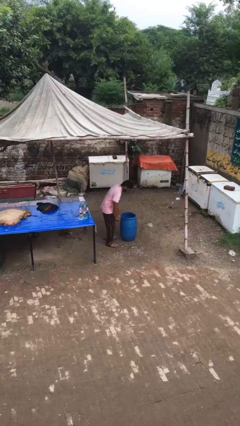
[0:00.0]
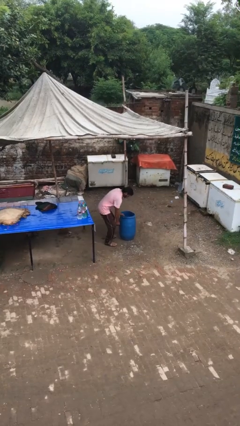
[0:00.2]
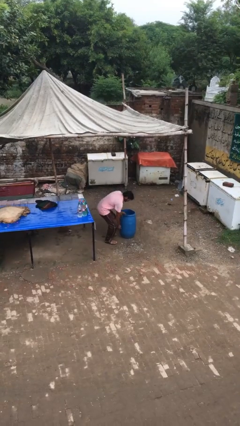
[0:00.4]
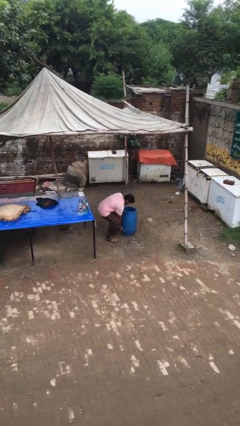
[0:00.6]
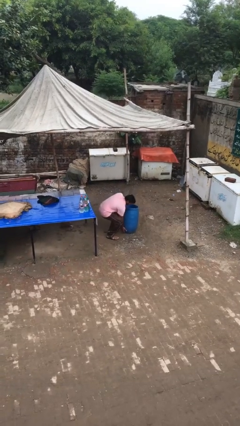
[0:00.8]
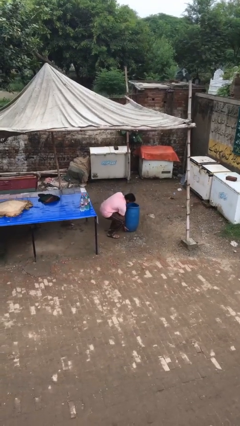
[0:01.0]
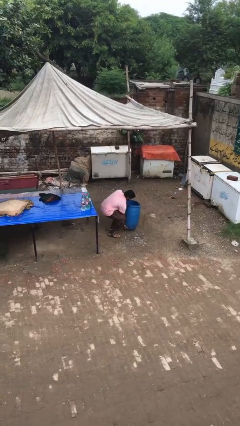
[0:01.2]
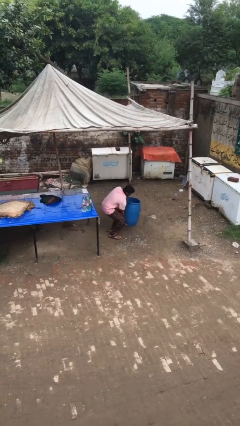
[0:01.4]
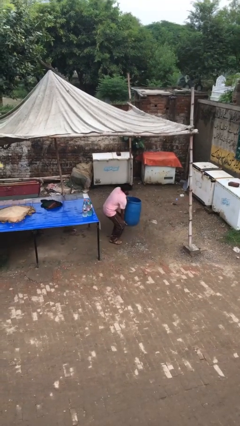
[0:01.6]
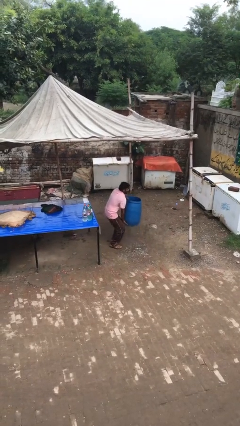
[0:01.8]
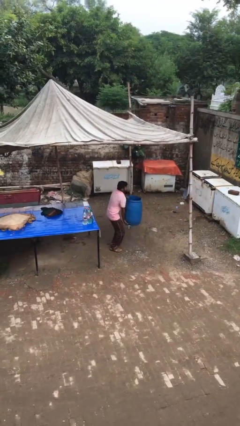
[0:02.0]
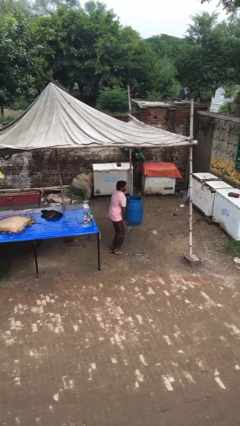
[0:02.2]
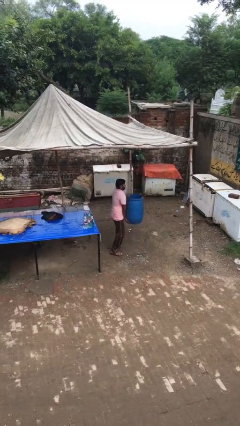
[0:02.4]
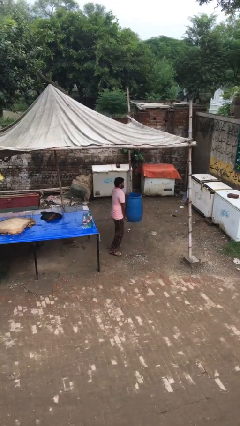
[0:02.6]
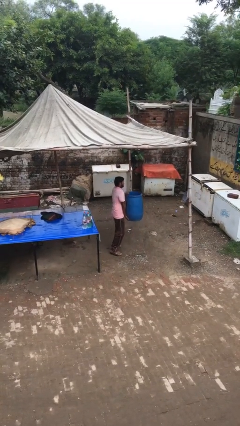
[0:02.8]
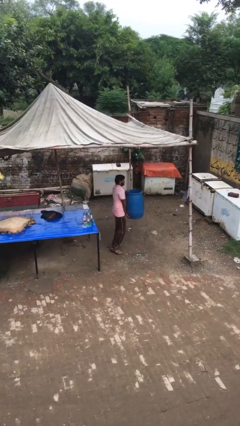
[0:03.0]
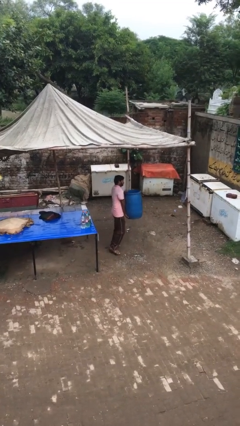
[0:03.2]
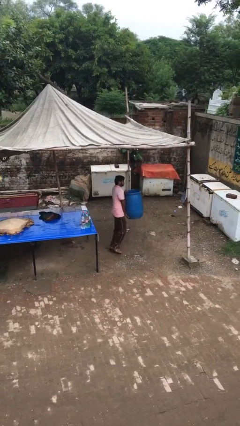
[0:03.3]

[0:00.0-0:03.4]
person picks up object from floor

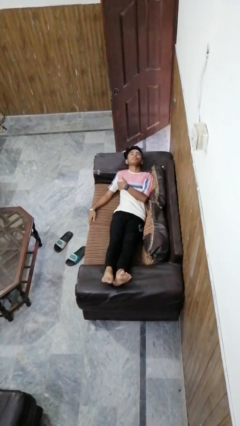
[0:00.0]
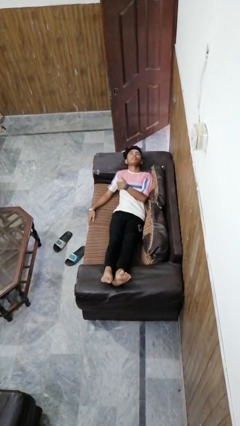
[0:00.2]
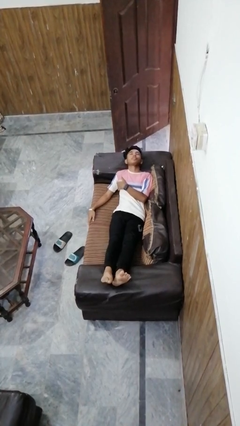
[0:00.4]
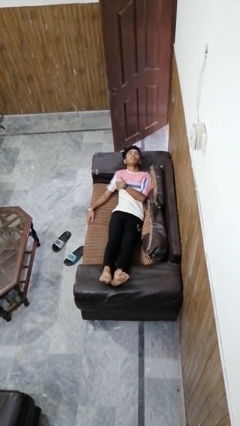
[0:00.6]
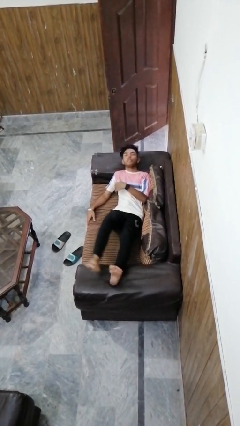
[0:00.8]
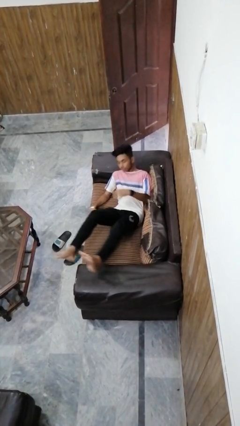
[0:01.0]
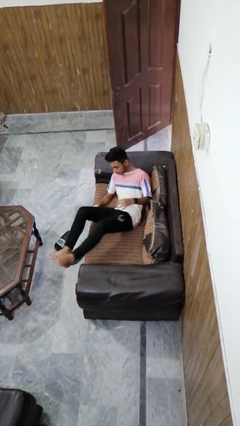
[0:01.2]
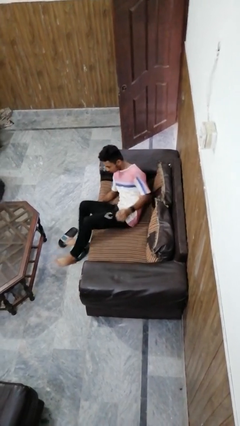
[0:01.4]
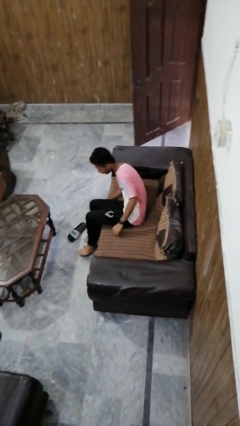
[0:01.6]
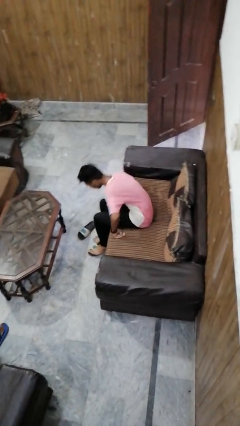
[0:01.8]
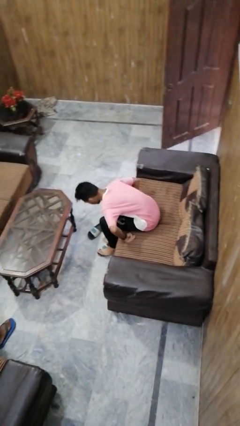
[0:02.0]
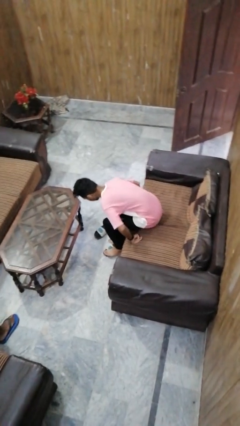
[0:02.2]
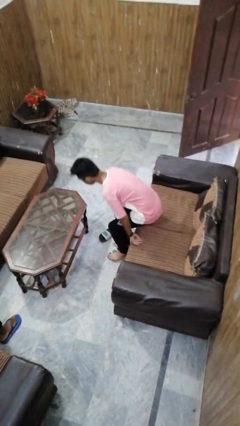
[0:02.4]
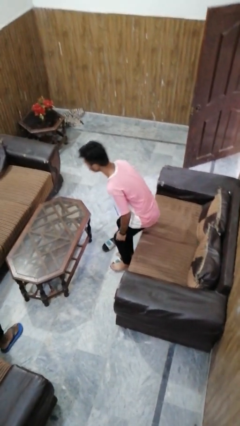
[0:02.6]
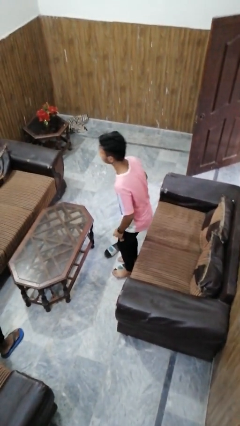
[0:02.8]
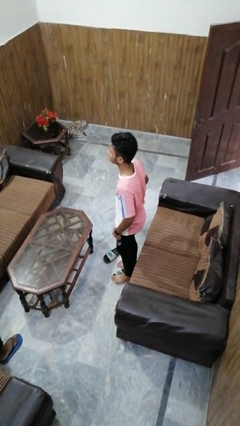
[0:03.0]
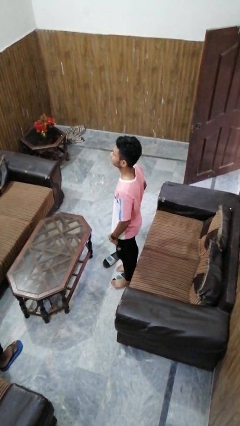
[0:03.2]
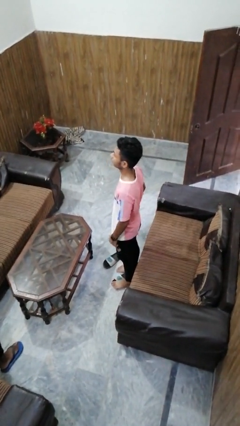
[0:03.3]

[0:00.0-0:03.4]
person stands up

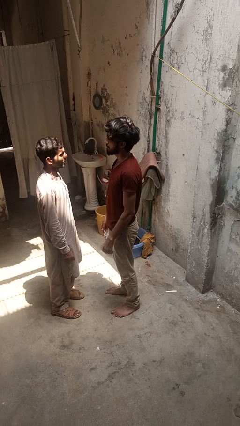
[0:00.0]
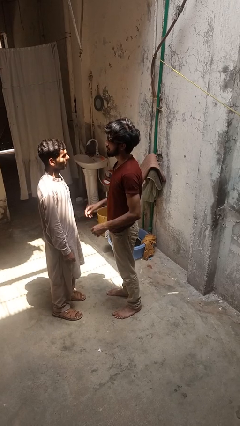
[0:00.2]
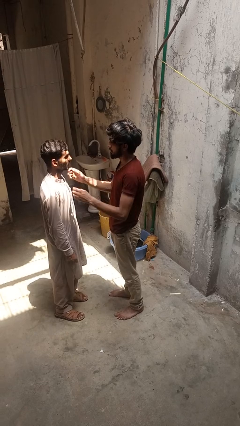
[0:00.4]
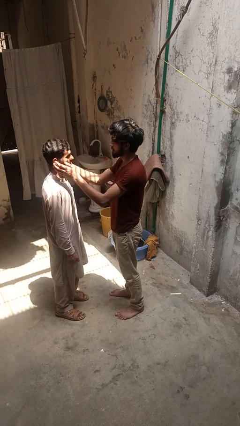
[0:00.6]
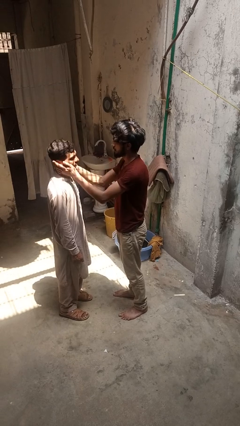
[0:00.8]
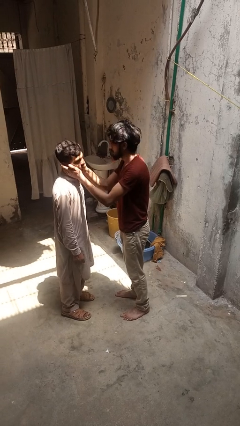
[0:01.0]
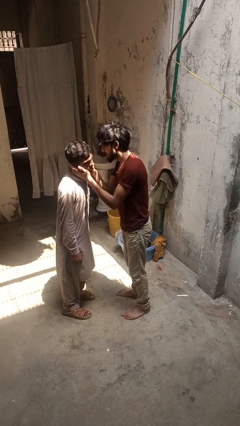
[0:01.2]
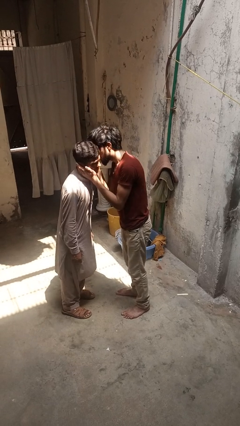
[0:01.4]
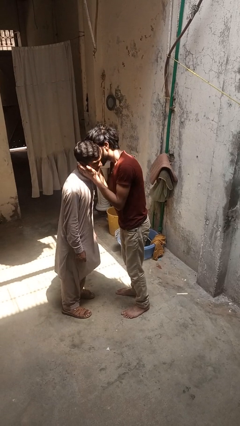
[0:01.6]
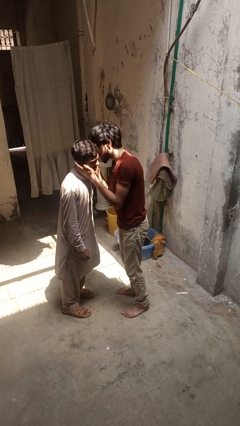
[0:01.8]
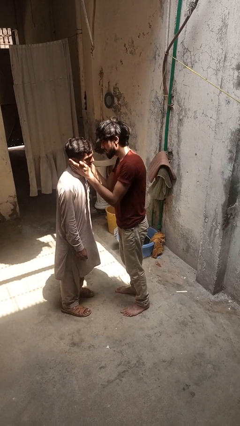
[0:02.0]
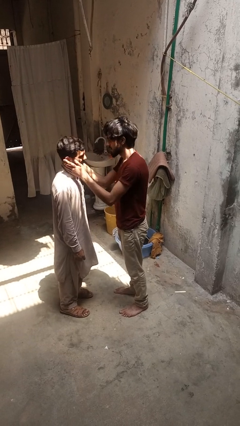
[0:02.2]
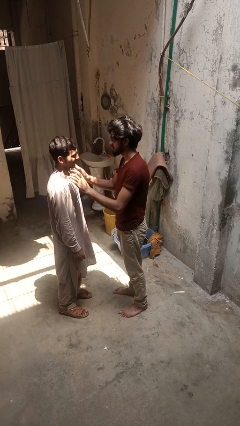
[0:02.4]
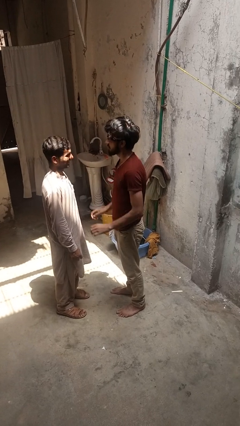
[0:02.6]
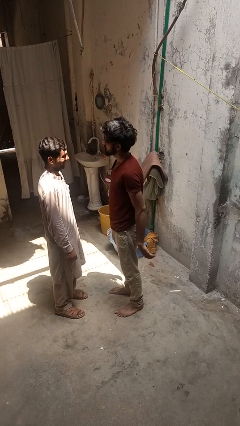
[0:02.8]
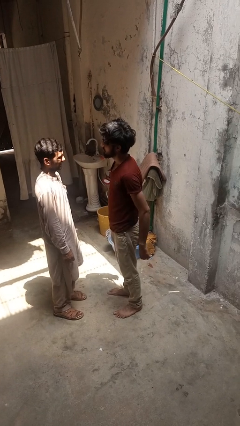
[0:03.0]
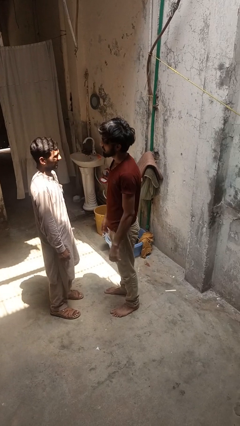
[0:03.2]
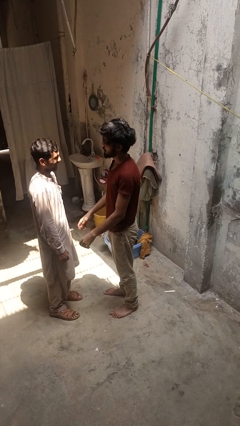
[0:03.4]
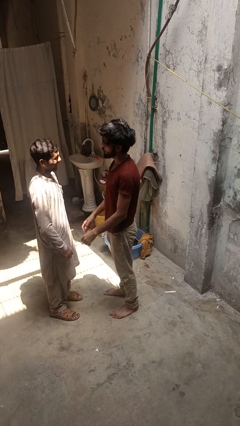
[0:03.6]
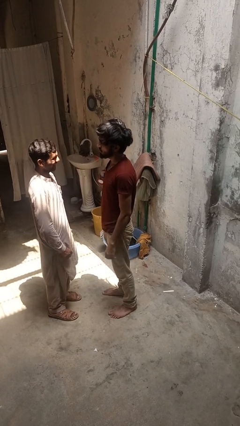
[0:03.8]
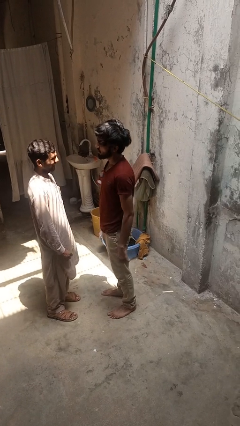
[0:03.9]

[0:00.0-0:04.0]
person kisses cheek of person

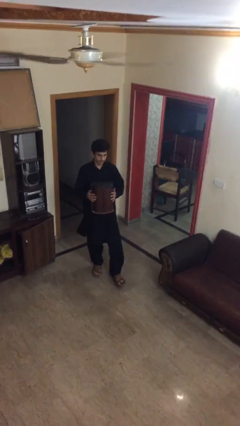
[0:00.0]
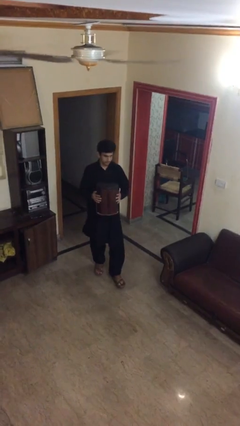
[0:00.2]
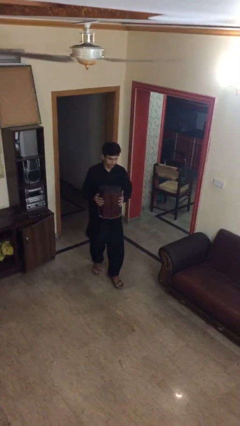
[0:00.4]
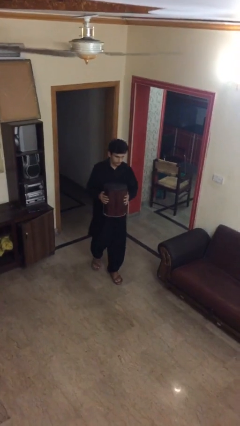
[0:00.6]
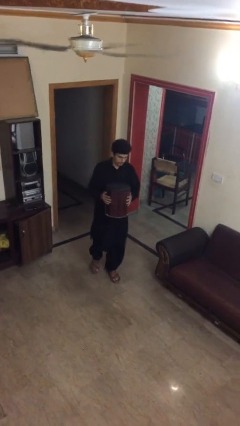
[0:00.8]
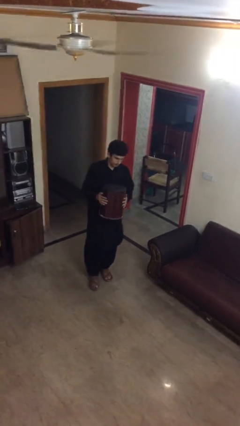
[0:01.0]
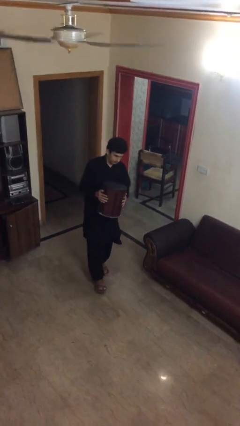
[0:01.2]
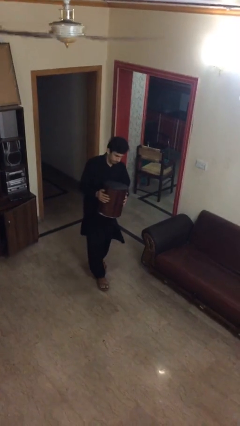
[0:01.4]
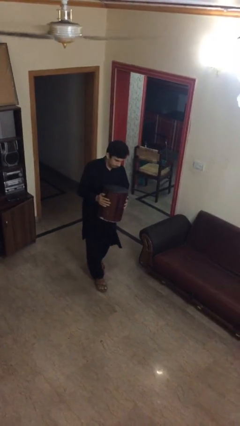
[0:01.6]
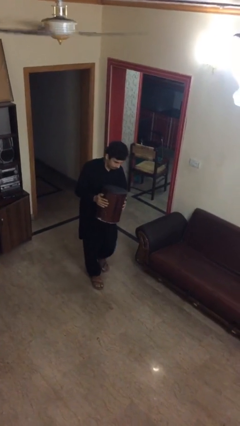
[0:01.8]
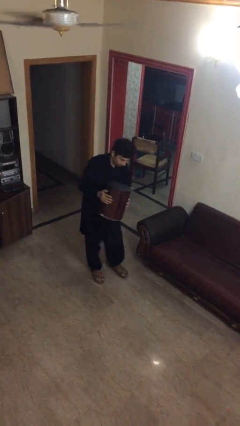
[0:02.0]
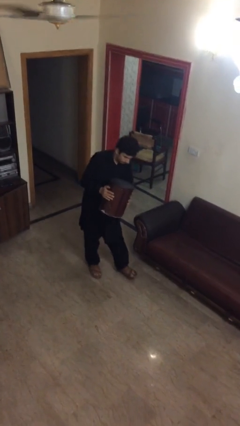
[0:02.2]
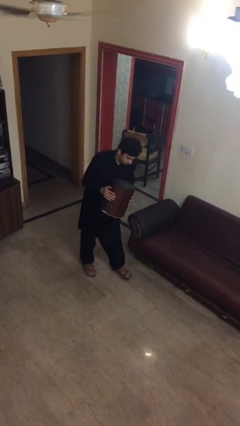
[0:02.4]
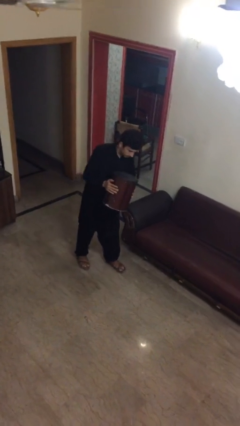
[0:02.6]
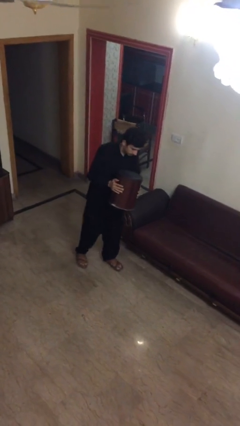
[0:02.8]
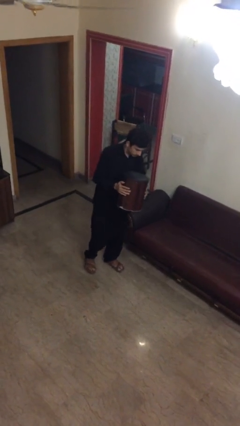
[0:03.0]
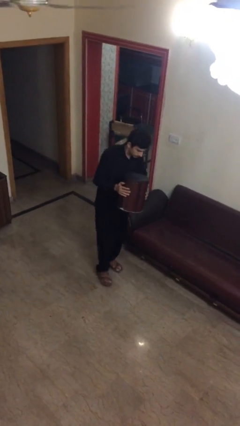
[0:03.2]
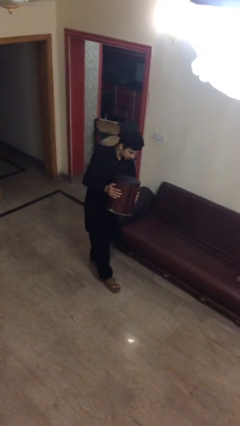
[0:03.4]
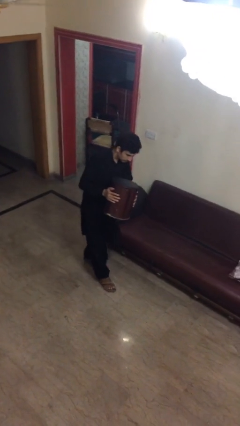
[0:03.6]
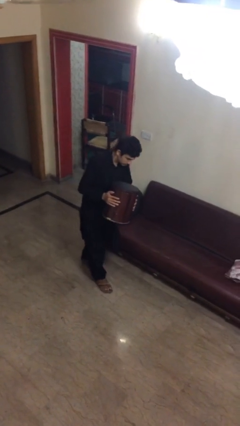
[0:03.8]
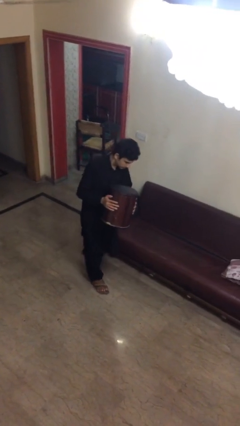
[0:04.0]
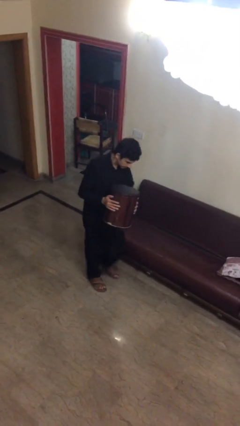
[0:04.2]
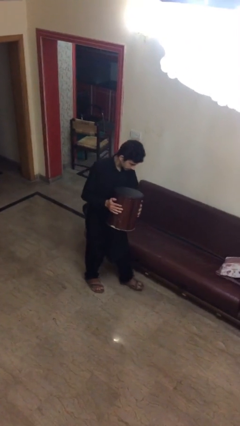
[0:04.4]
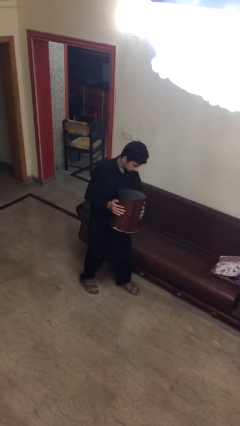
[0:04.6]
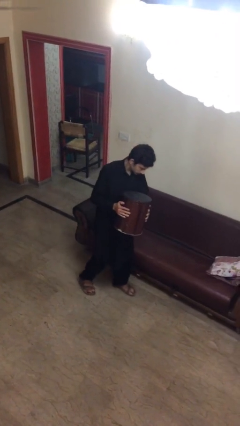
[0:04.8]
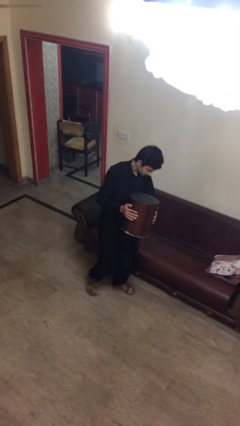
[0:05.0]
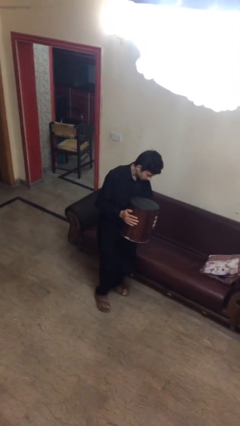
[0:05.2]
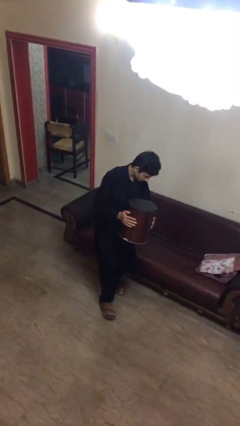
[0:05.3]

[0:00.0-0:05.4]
person carries heavy object

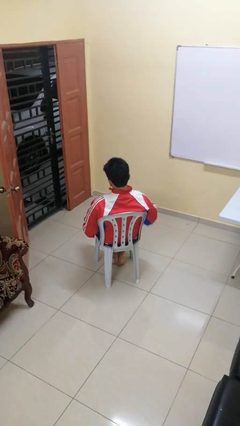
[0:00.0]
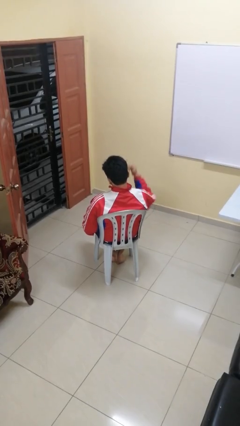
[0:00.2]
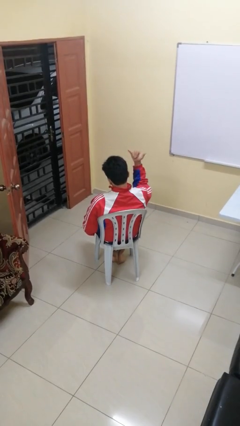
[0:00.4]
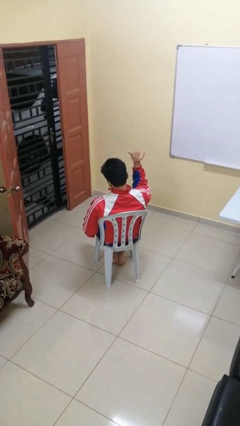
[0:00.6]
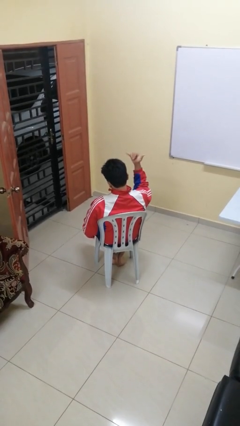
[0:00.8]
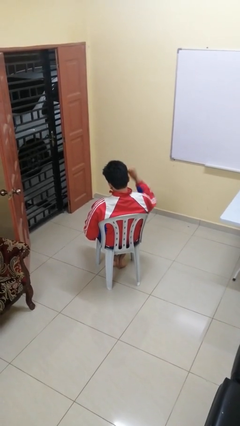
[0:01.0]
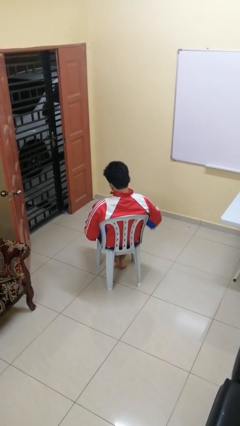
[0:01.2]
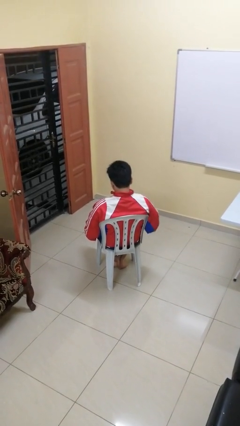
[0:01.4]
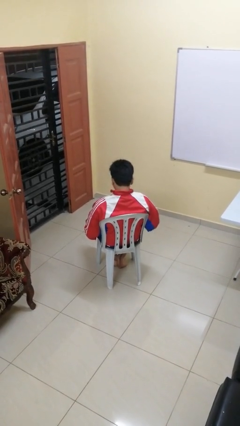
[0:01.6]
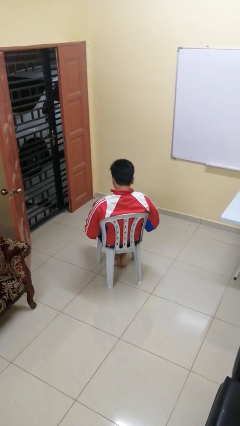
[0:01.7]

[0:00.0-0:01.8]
person gestures hang loose
